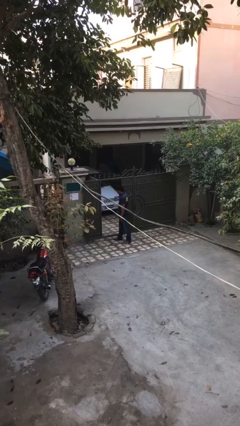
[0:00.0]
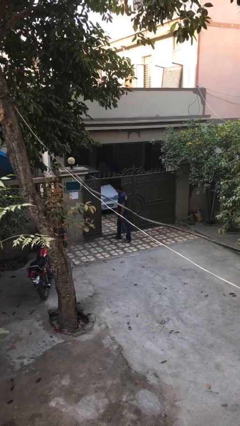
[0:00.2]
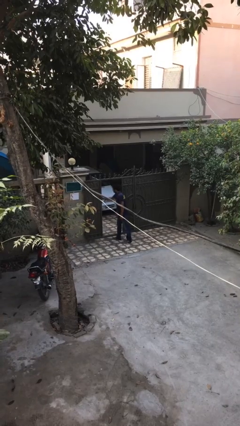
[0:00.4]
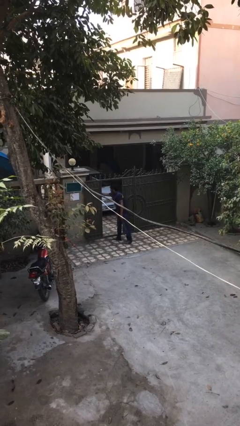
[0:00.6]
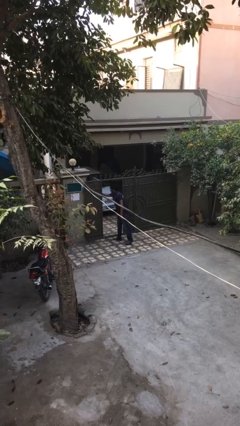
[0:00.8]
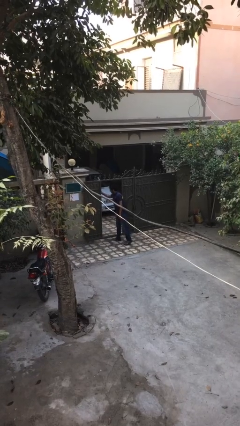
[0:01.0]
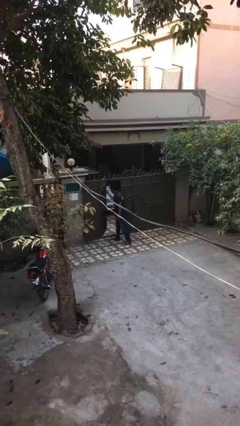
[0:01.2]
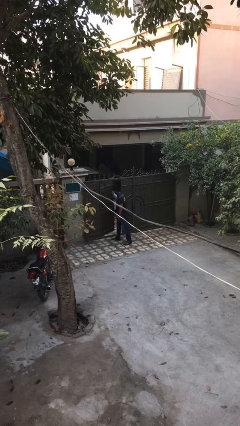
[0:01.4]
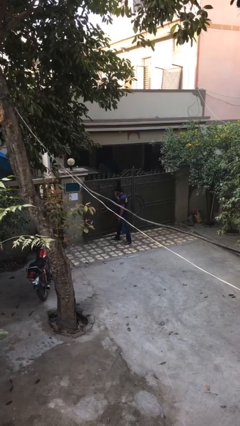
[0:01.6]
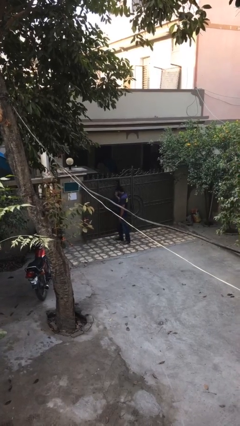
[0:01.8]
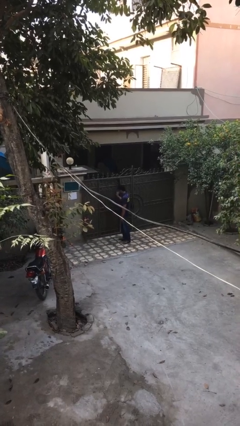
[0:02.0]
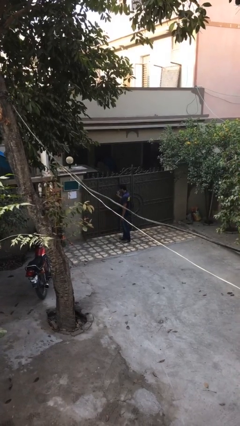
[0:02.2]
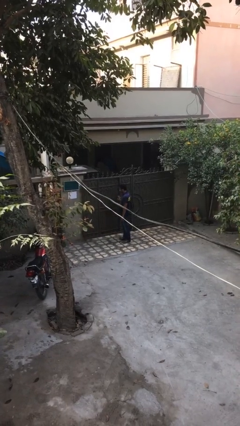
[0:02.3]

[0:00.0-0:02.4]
person closes facility door

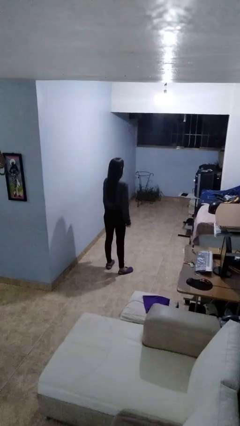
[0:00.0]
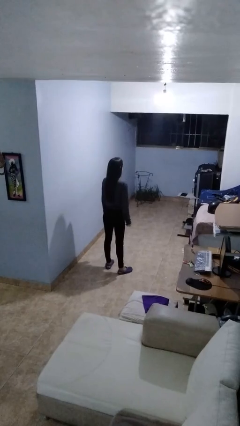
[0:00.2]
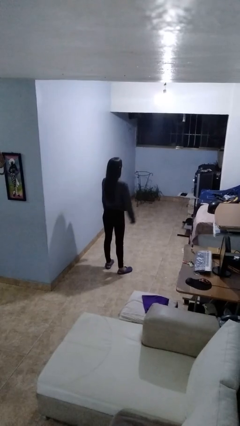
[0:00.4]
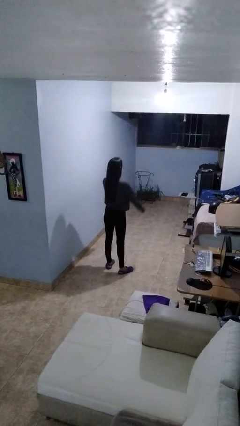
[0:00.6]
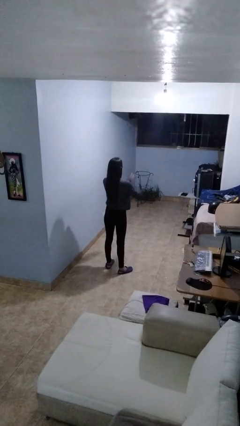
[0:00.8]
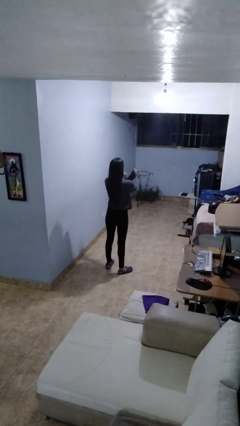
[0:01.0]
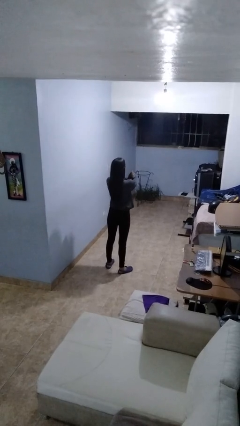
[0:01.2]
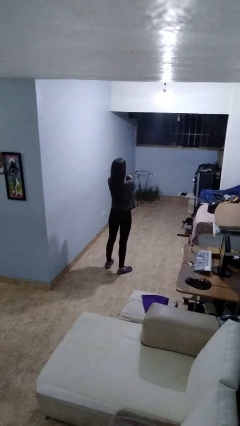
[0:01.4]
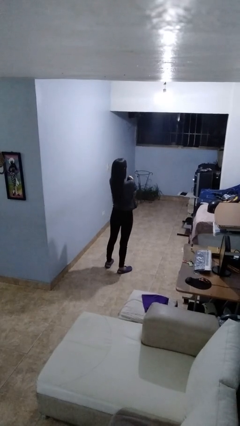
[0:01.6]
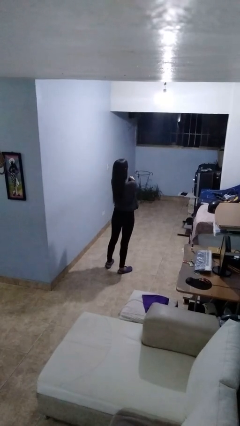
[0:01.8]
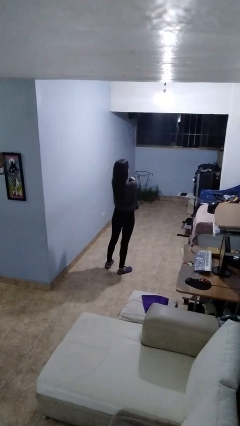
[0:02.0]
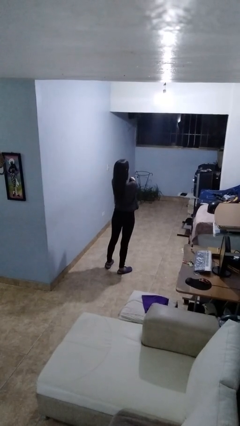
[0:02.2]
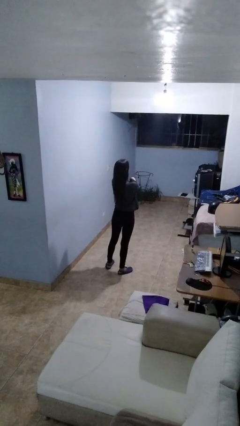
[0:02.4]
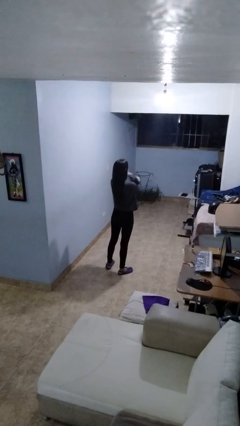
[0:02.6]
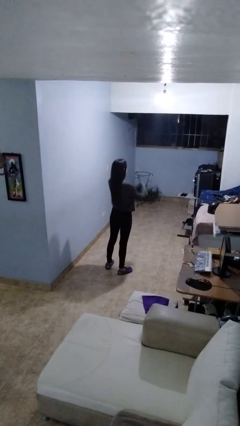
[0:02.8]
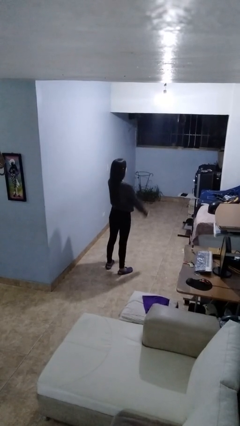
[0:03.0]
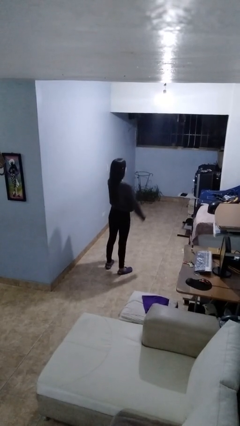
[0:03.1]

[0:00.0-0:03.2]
person gestures arms x

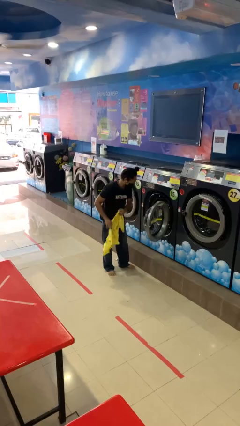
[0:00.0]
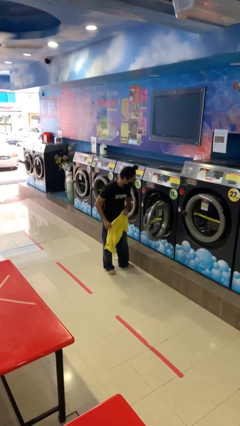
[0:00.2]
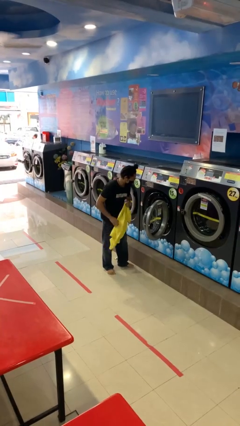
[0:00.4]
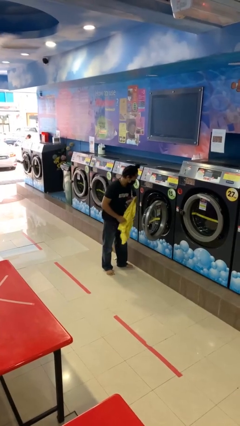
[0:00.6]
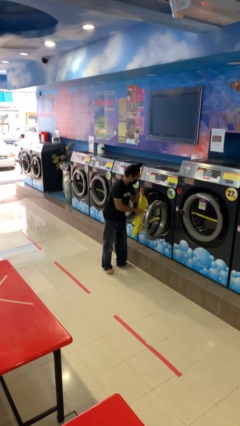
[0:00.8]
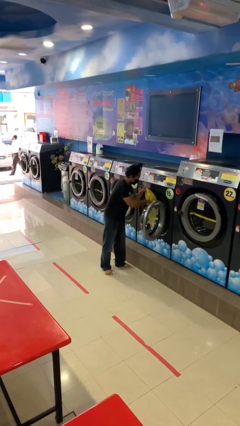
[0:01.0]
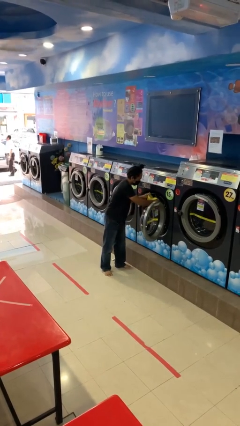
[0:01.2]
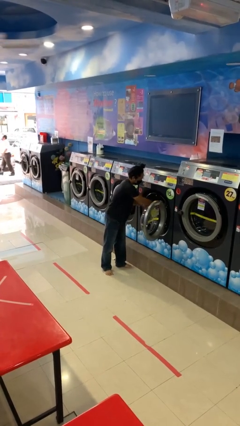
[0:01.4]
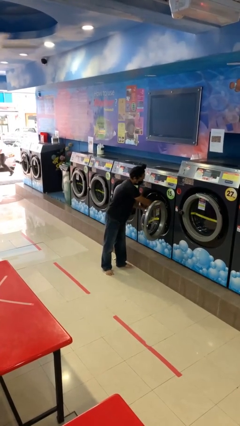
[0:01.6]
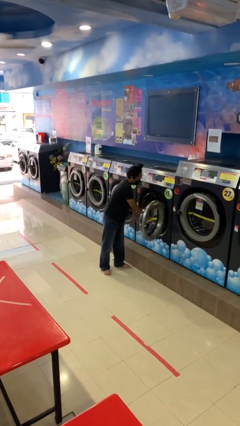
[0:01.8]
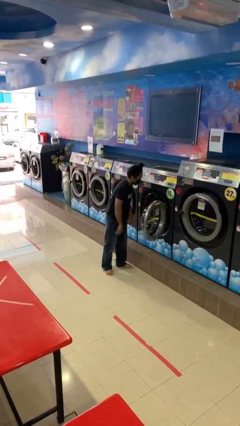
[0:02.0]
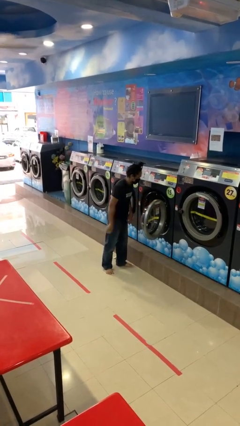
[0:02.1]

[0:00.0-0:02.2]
person loads clotheswasher

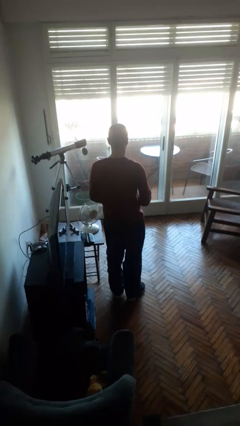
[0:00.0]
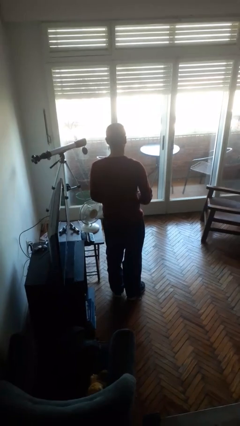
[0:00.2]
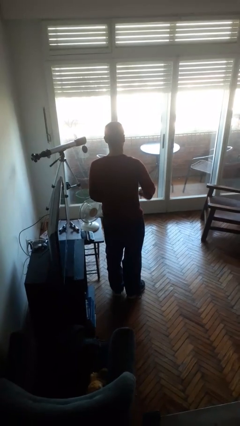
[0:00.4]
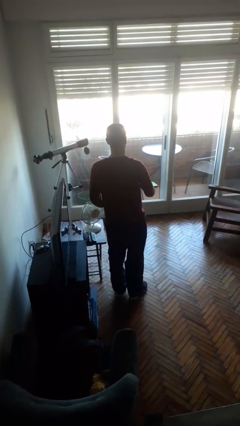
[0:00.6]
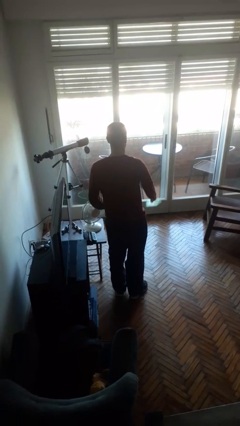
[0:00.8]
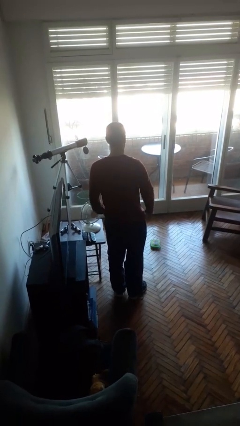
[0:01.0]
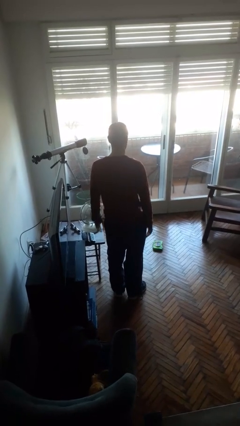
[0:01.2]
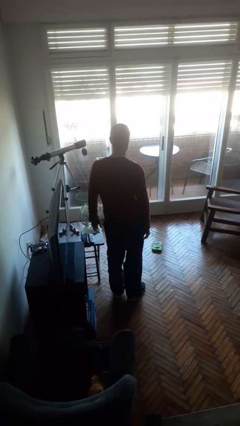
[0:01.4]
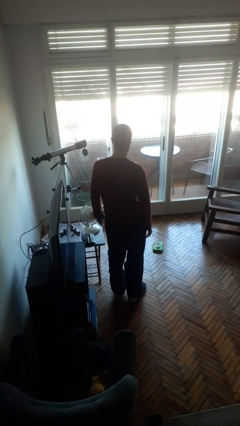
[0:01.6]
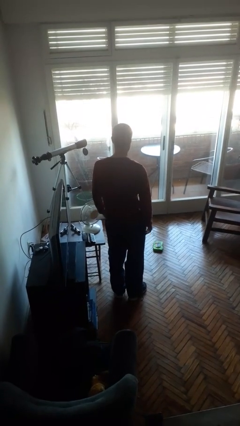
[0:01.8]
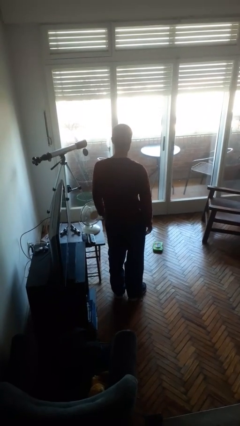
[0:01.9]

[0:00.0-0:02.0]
person throws object to ground

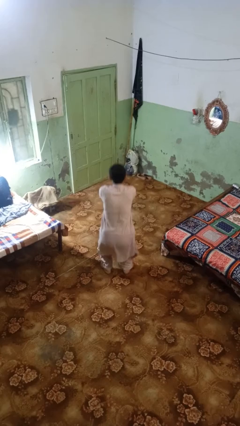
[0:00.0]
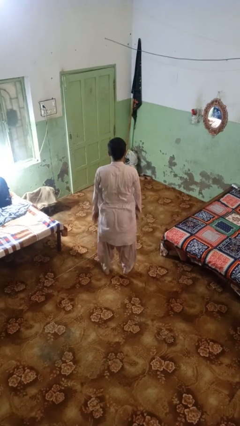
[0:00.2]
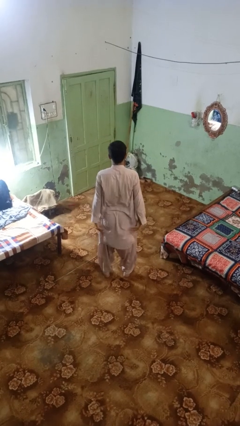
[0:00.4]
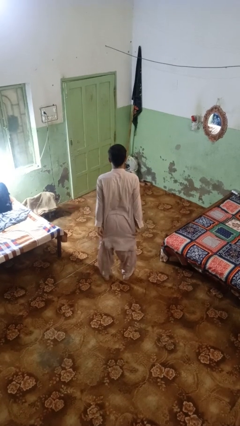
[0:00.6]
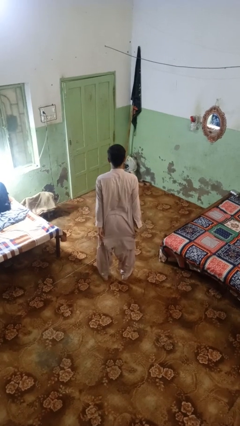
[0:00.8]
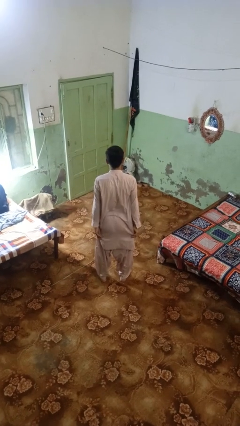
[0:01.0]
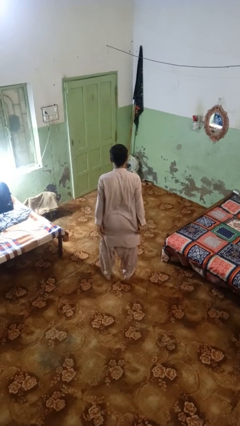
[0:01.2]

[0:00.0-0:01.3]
person stands up

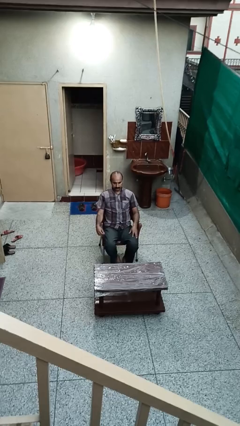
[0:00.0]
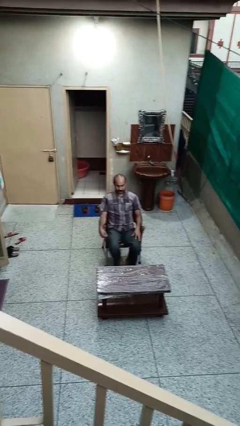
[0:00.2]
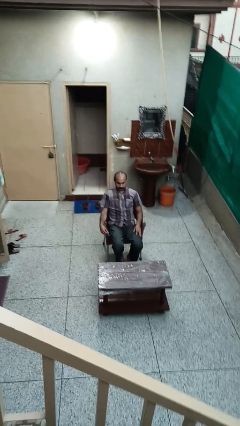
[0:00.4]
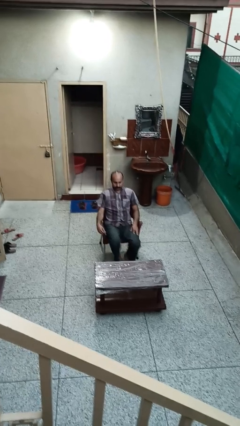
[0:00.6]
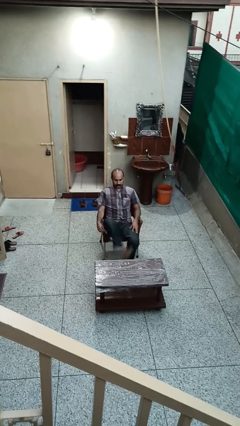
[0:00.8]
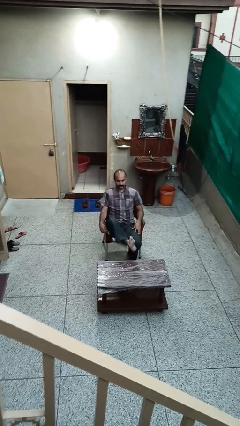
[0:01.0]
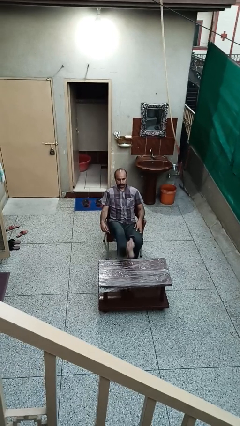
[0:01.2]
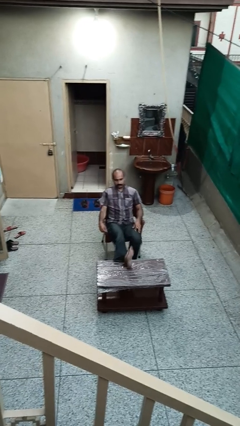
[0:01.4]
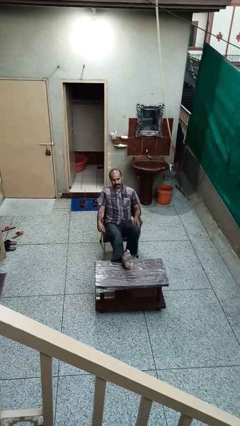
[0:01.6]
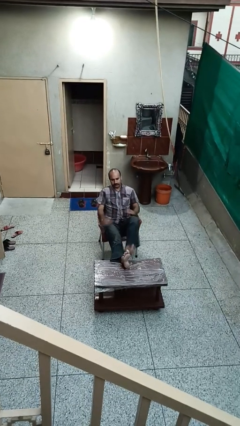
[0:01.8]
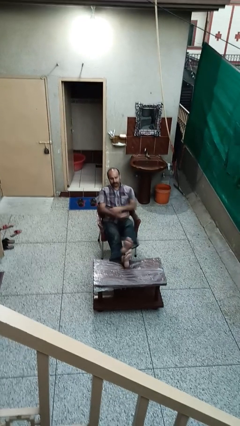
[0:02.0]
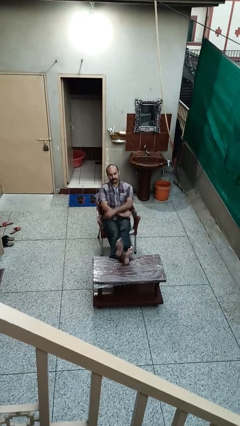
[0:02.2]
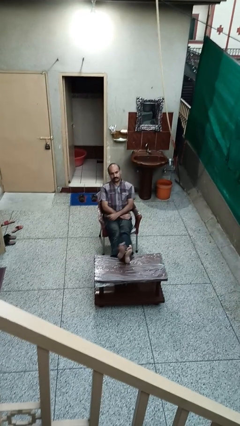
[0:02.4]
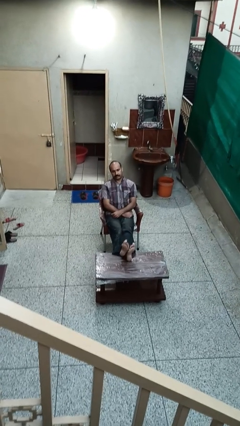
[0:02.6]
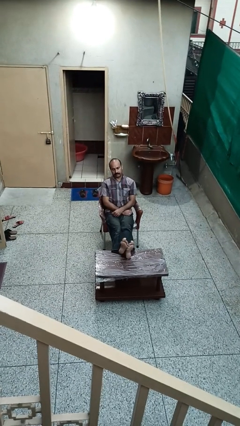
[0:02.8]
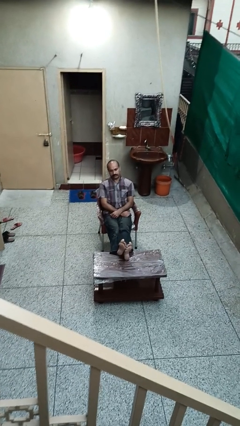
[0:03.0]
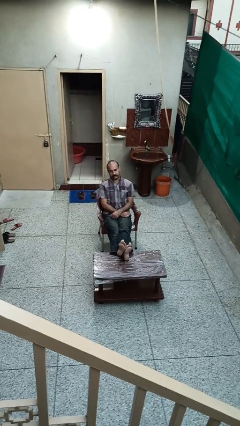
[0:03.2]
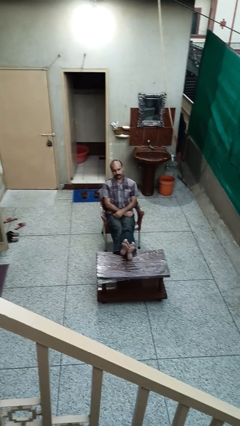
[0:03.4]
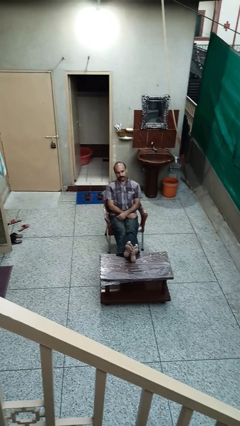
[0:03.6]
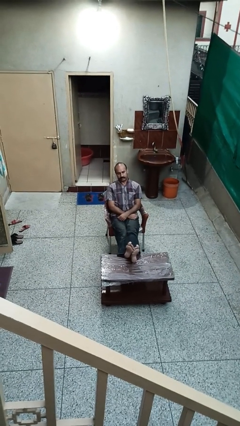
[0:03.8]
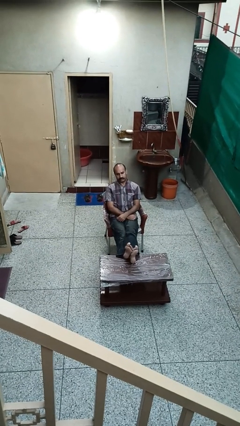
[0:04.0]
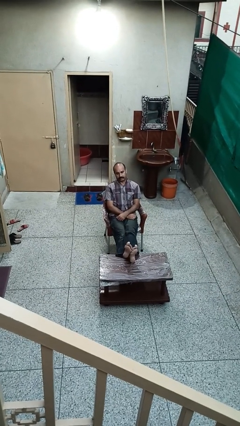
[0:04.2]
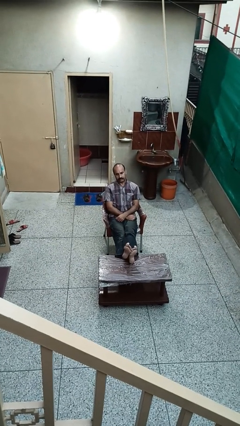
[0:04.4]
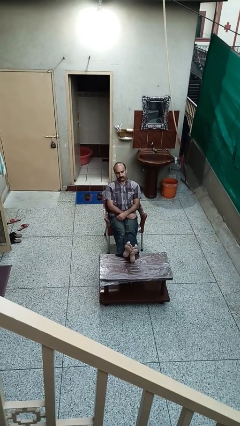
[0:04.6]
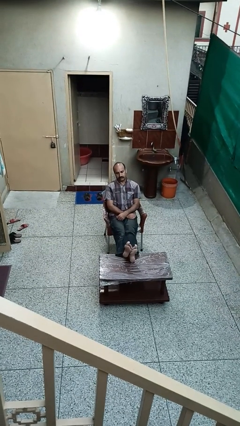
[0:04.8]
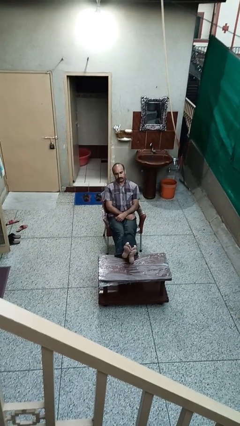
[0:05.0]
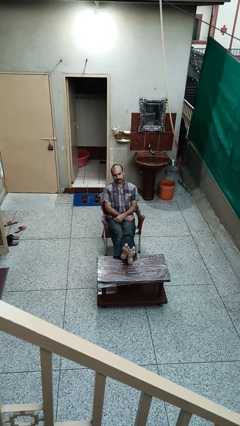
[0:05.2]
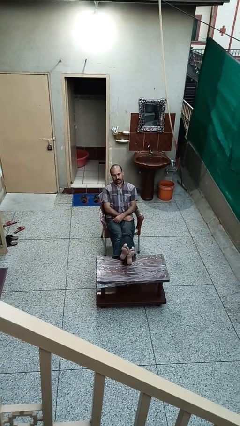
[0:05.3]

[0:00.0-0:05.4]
person puts feet up

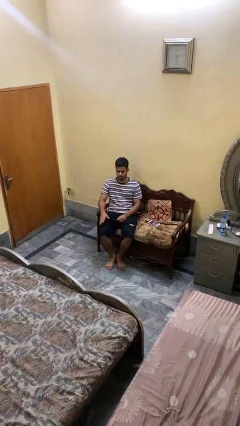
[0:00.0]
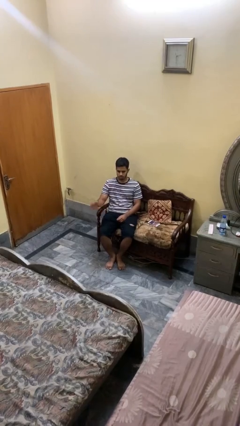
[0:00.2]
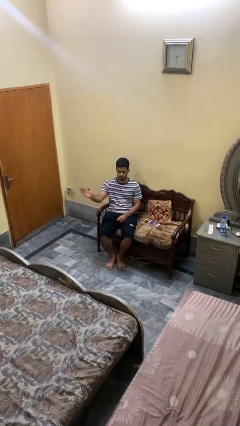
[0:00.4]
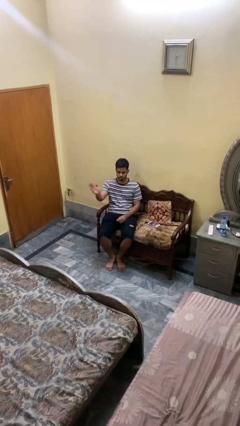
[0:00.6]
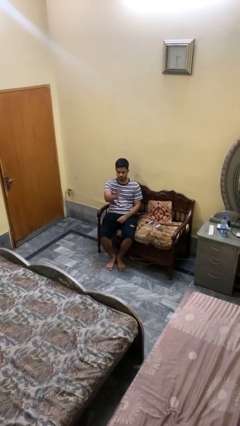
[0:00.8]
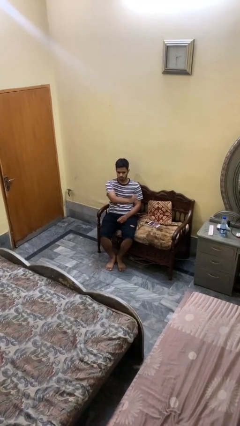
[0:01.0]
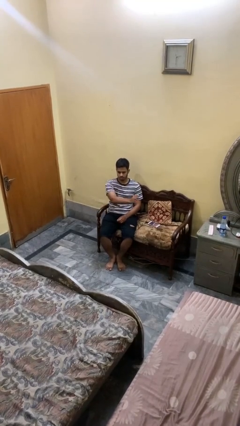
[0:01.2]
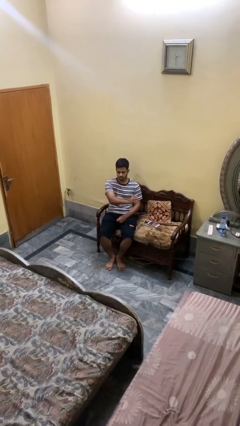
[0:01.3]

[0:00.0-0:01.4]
person gestures swipe left
